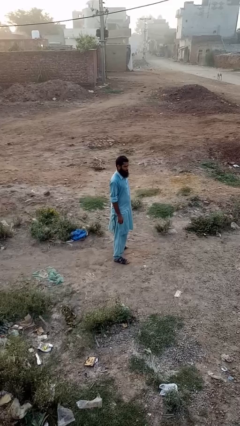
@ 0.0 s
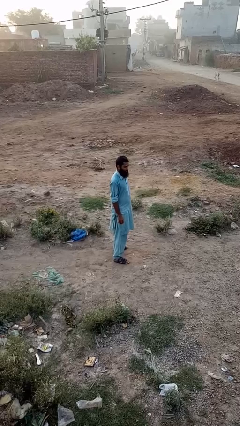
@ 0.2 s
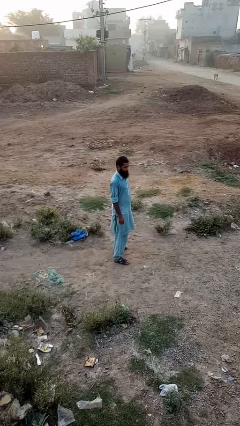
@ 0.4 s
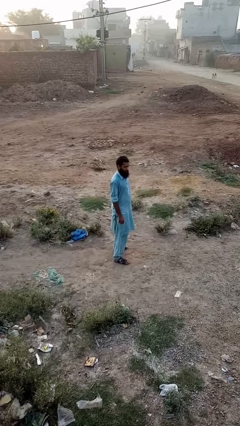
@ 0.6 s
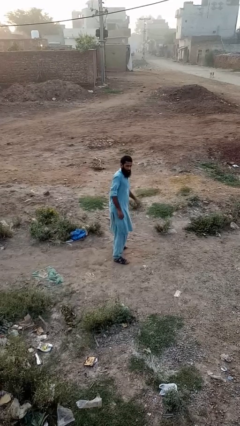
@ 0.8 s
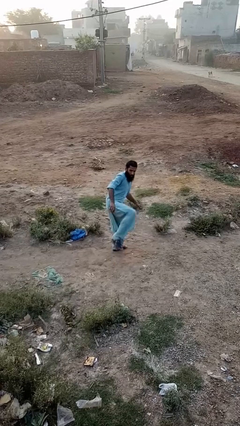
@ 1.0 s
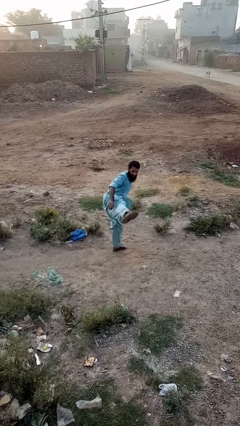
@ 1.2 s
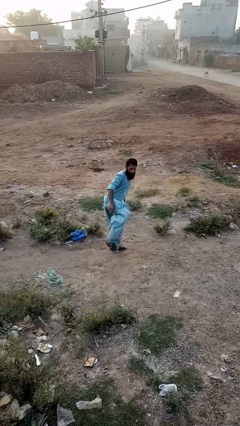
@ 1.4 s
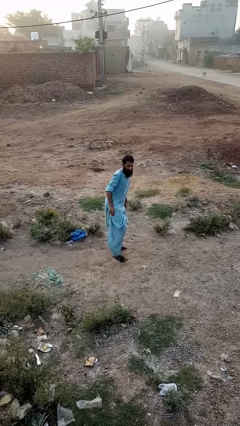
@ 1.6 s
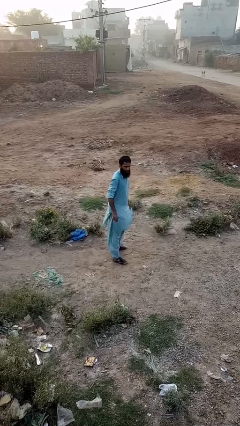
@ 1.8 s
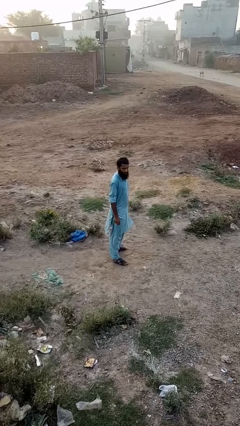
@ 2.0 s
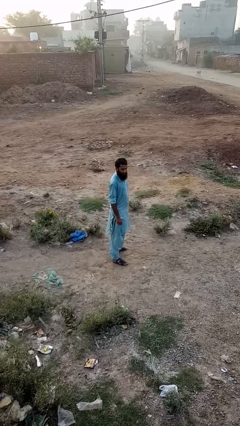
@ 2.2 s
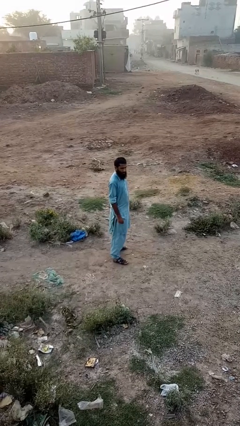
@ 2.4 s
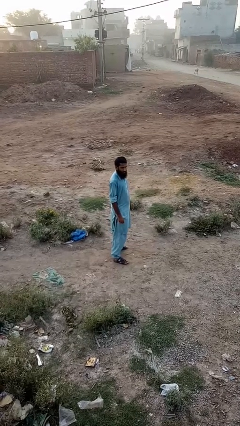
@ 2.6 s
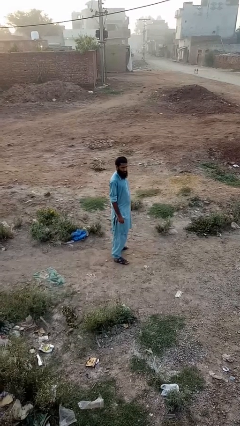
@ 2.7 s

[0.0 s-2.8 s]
person karate kicks

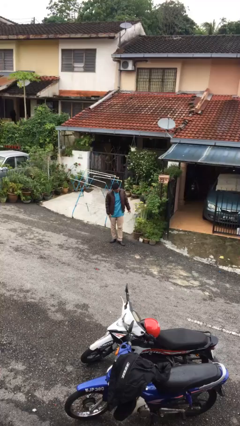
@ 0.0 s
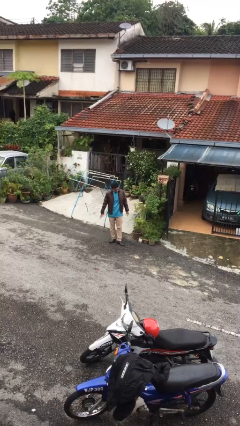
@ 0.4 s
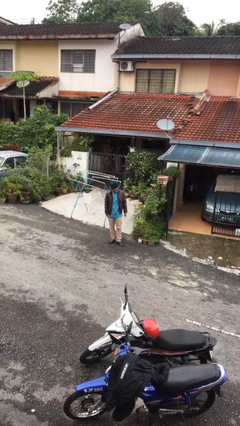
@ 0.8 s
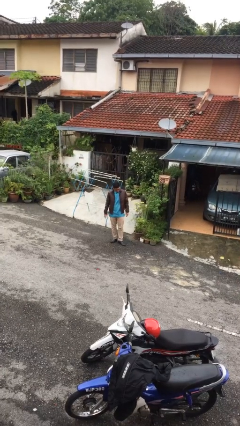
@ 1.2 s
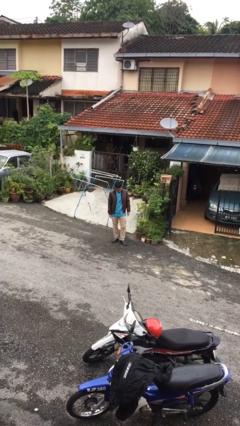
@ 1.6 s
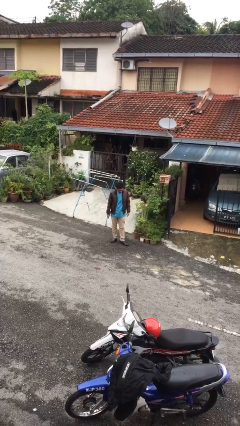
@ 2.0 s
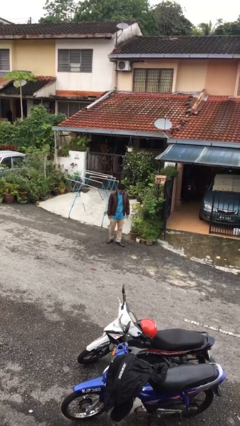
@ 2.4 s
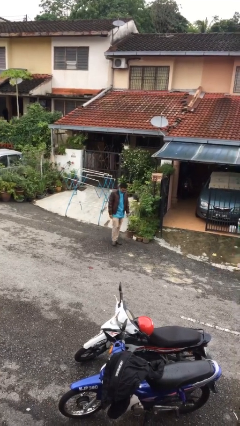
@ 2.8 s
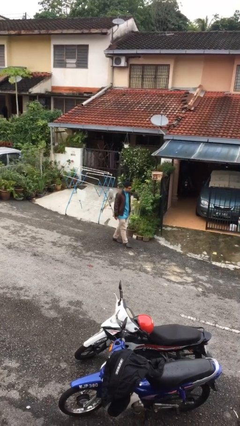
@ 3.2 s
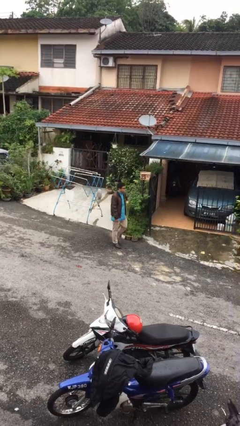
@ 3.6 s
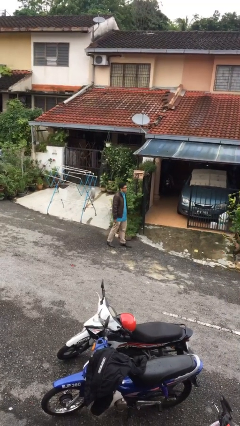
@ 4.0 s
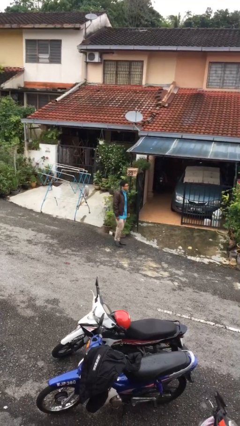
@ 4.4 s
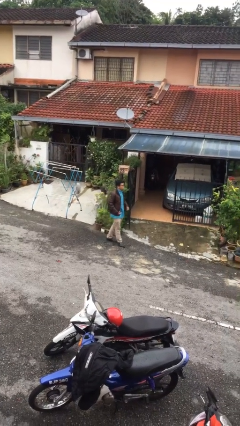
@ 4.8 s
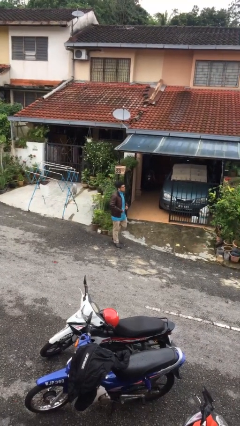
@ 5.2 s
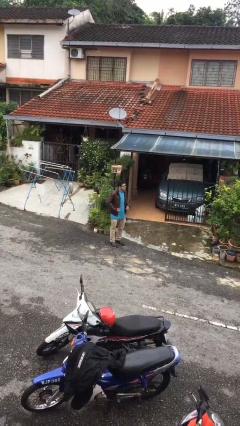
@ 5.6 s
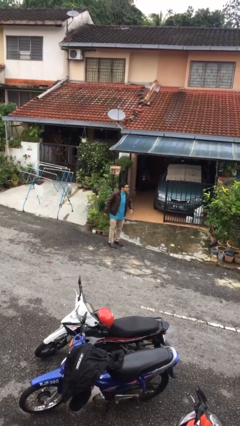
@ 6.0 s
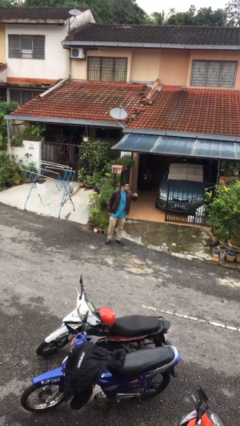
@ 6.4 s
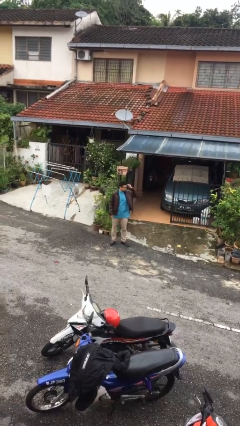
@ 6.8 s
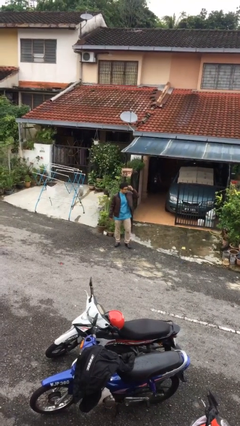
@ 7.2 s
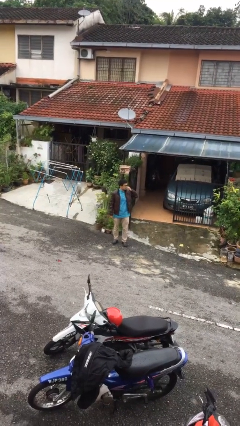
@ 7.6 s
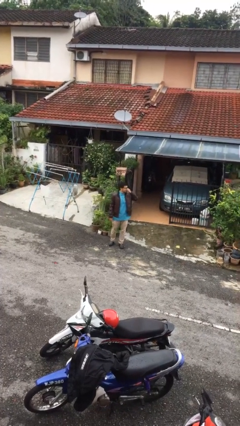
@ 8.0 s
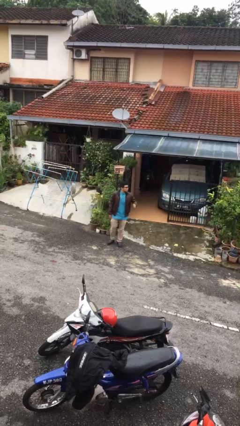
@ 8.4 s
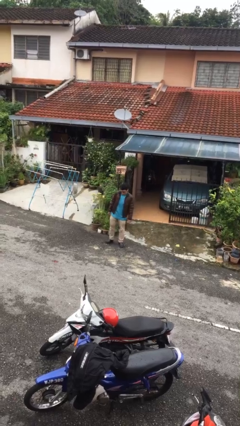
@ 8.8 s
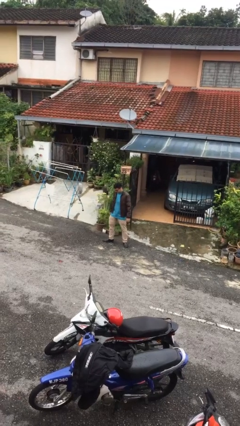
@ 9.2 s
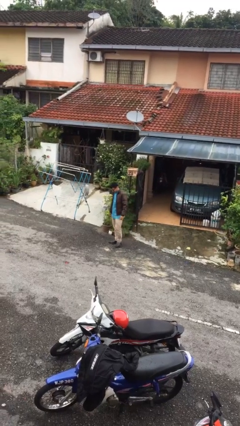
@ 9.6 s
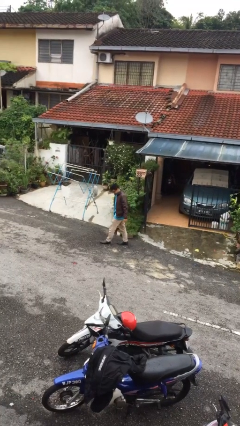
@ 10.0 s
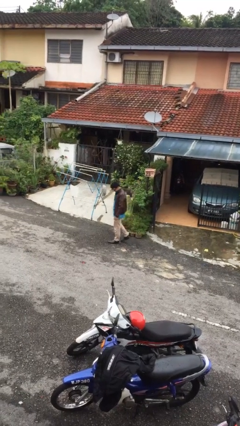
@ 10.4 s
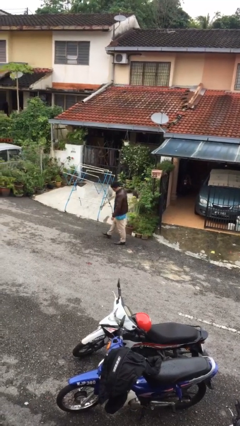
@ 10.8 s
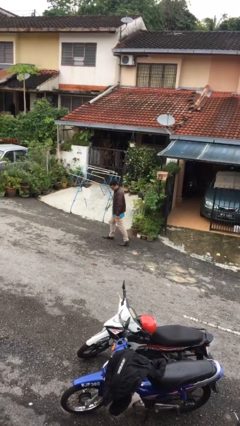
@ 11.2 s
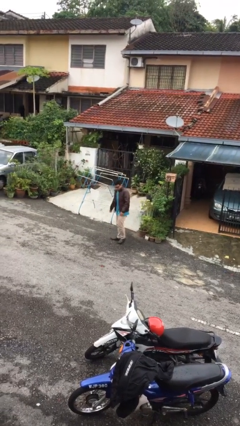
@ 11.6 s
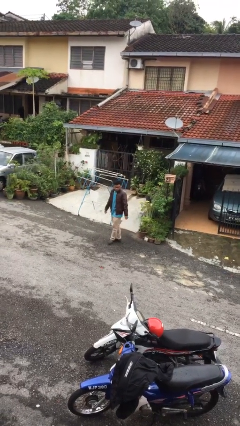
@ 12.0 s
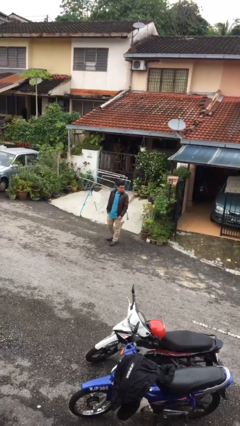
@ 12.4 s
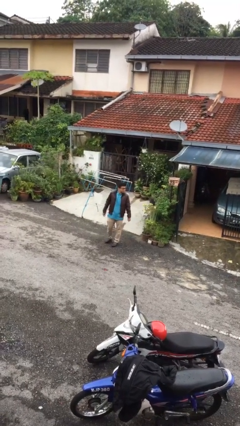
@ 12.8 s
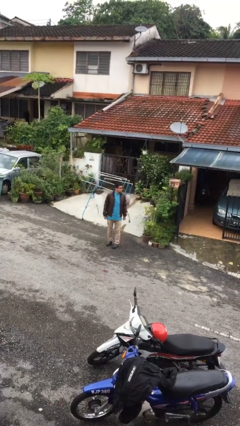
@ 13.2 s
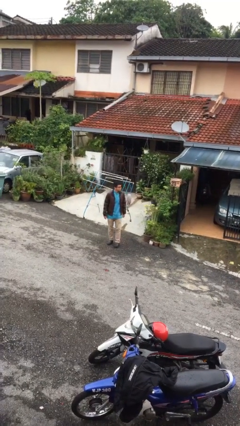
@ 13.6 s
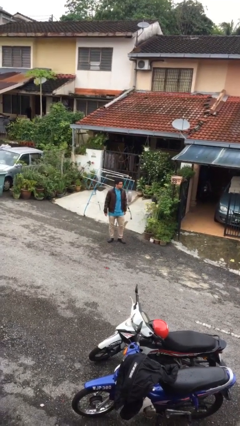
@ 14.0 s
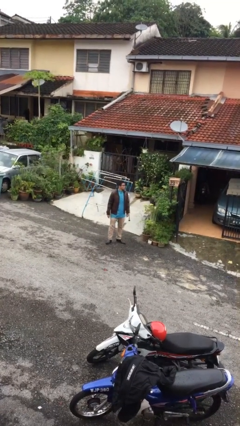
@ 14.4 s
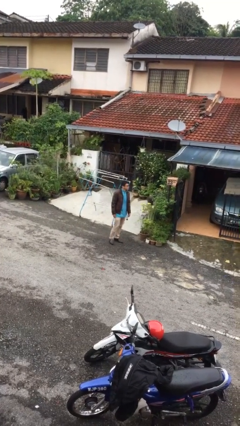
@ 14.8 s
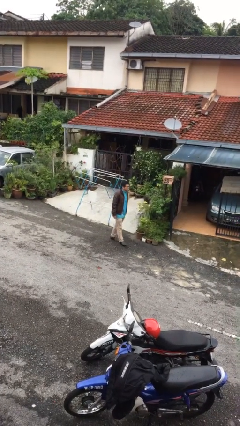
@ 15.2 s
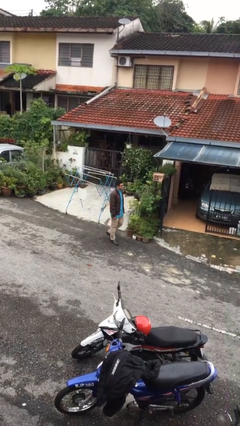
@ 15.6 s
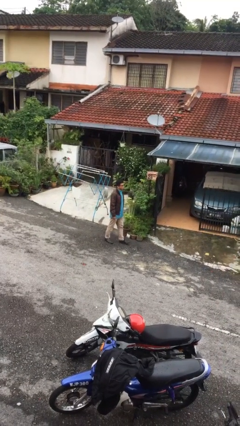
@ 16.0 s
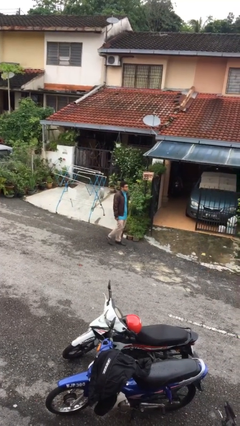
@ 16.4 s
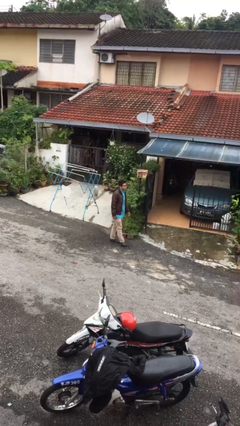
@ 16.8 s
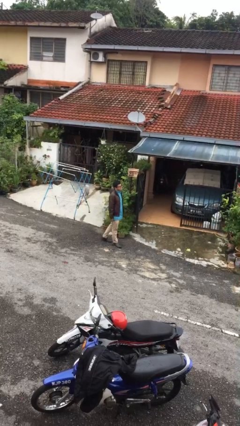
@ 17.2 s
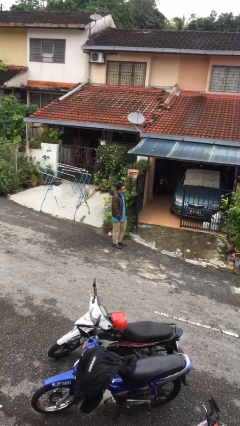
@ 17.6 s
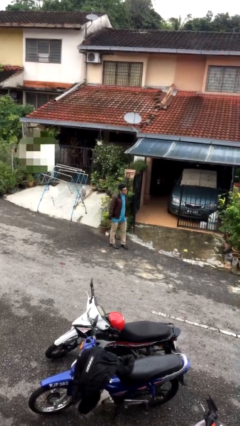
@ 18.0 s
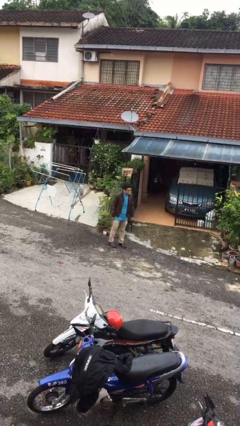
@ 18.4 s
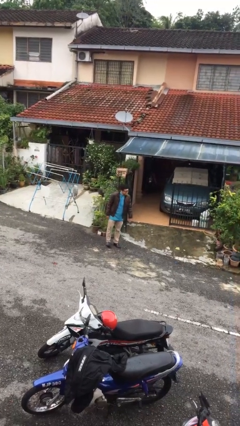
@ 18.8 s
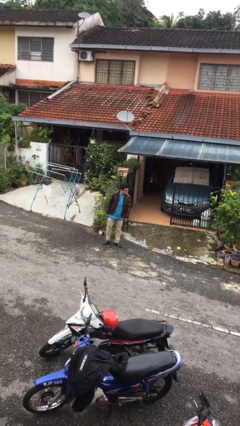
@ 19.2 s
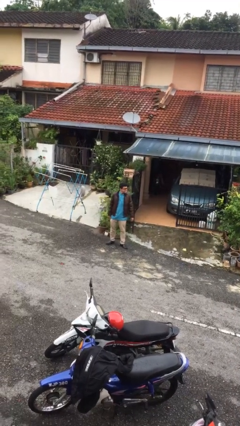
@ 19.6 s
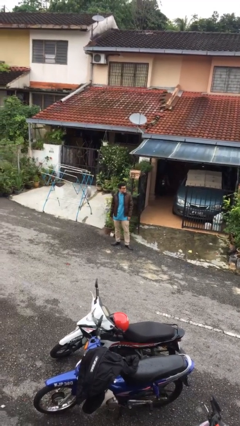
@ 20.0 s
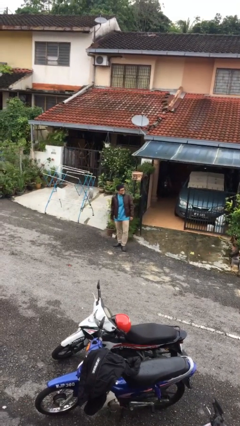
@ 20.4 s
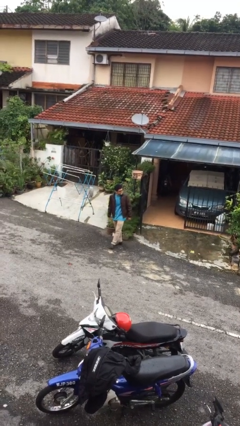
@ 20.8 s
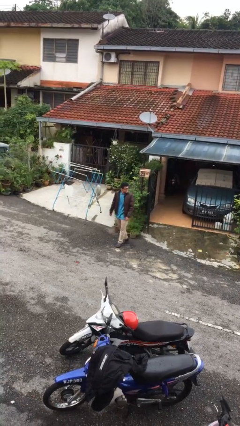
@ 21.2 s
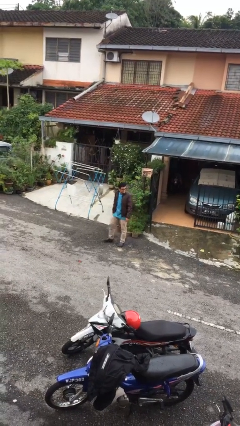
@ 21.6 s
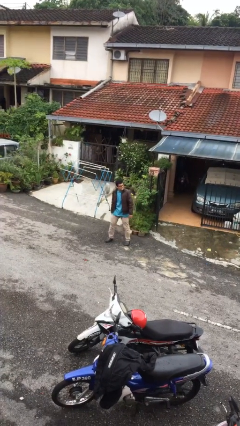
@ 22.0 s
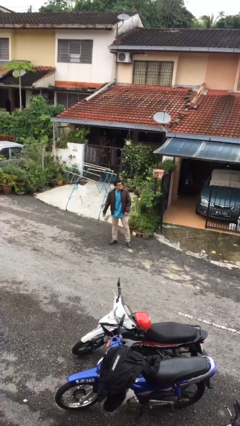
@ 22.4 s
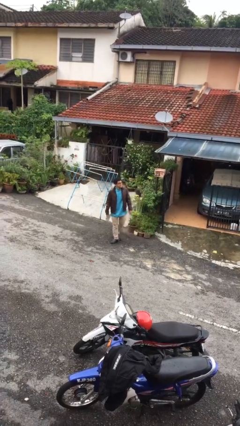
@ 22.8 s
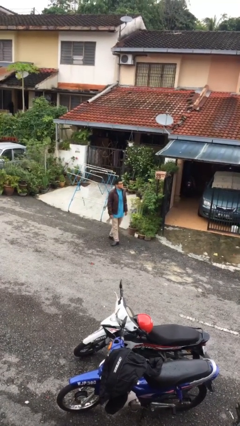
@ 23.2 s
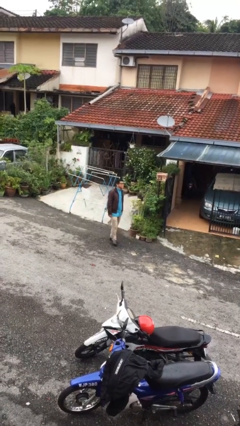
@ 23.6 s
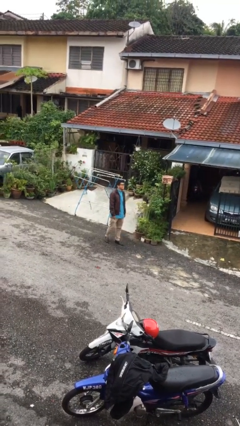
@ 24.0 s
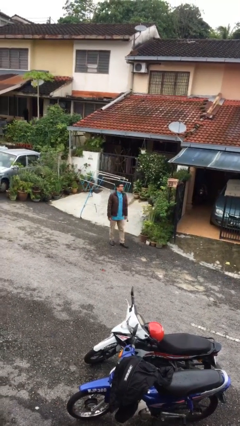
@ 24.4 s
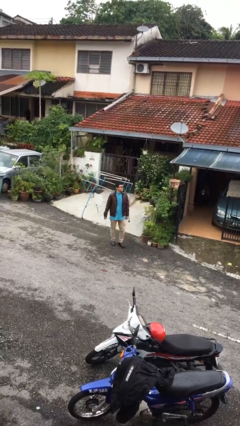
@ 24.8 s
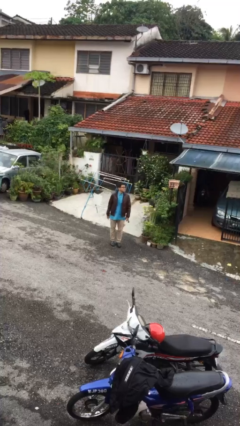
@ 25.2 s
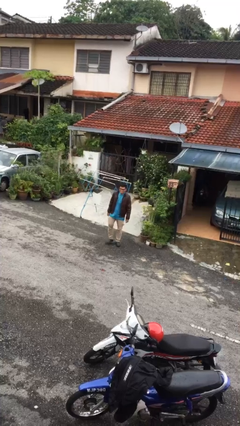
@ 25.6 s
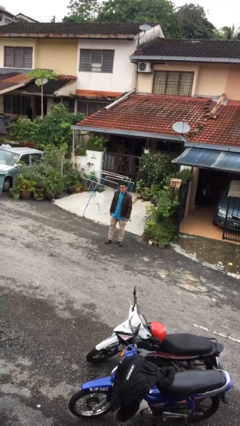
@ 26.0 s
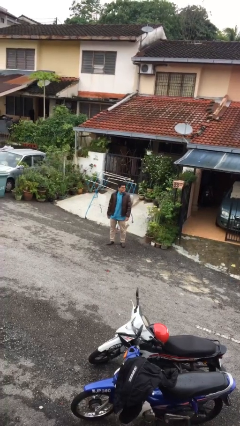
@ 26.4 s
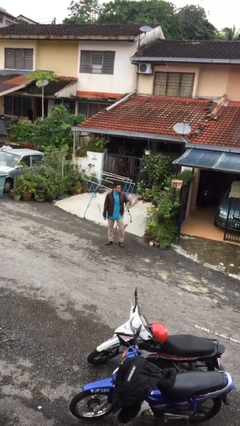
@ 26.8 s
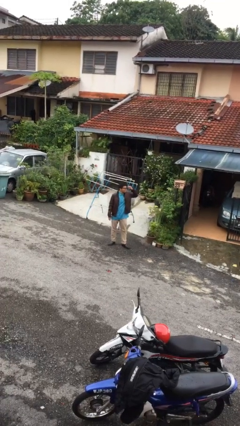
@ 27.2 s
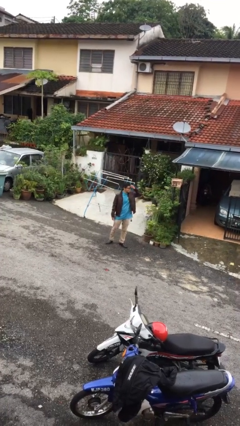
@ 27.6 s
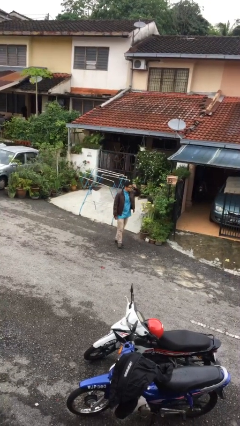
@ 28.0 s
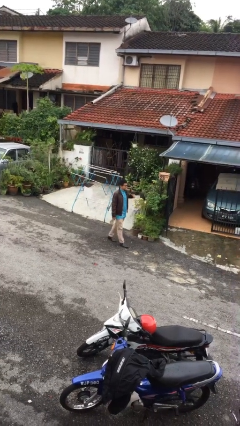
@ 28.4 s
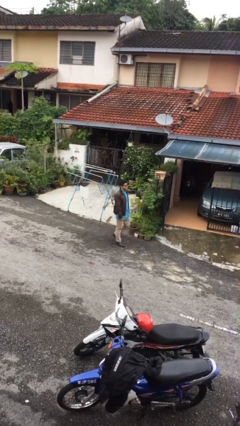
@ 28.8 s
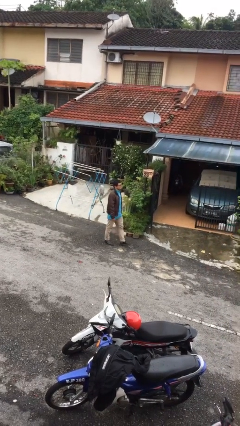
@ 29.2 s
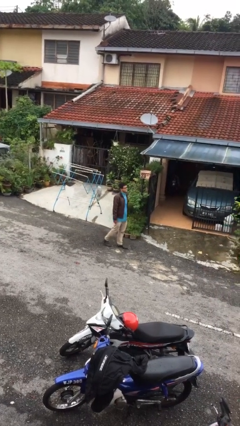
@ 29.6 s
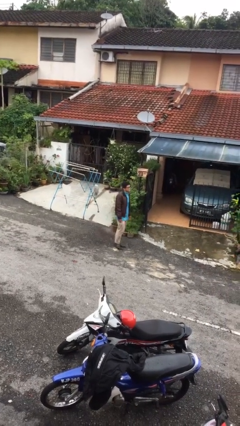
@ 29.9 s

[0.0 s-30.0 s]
person walks

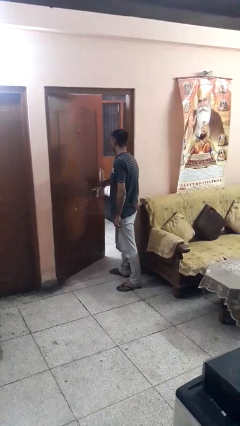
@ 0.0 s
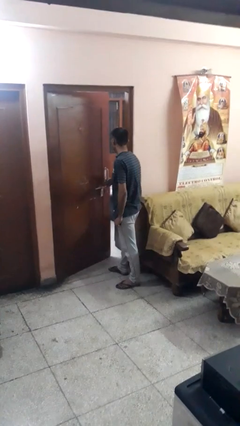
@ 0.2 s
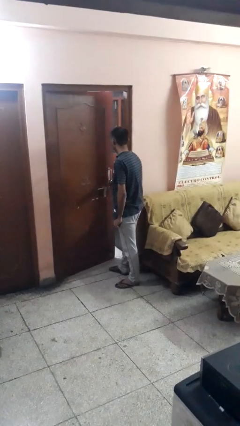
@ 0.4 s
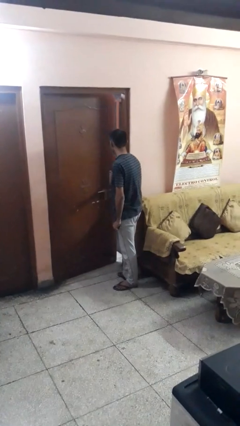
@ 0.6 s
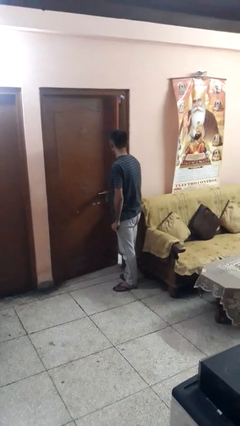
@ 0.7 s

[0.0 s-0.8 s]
person closes facility door
